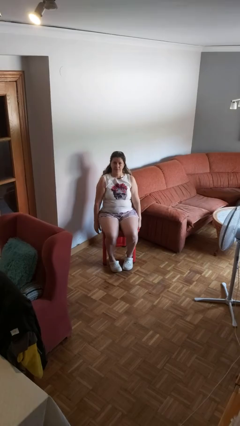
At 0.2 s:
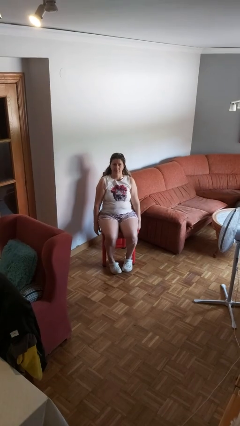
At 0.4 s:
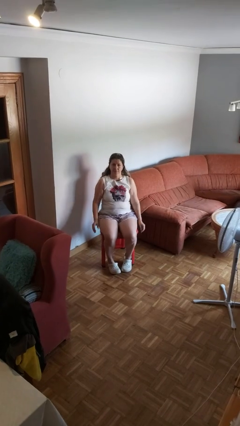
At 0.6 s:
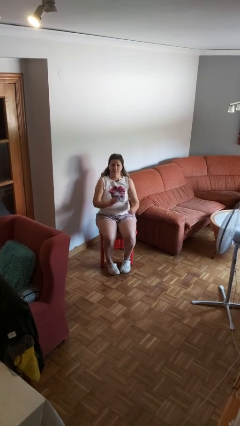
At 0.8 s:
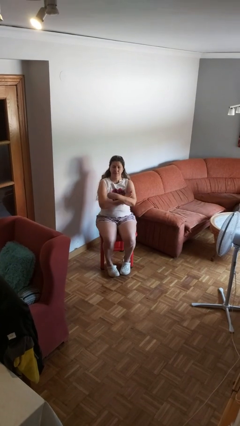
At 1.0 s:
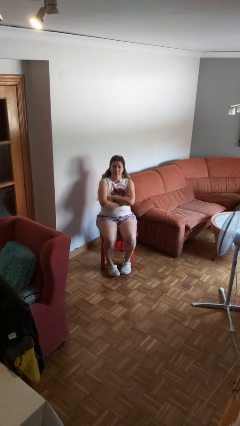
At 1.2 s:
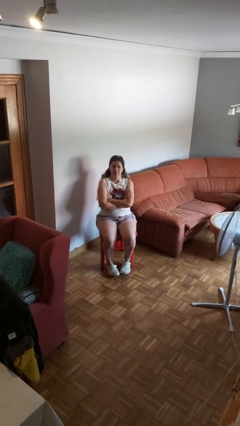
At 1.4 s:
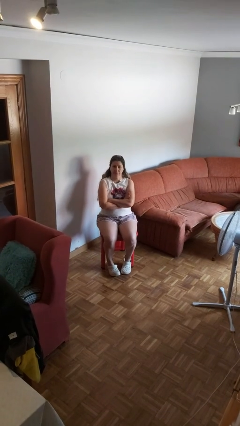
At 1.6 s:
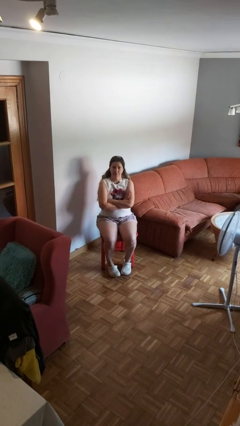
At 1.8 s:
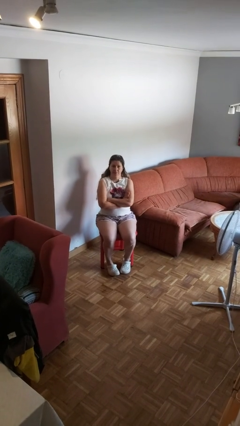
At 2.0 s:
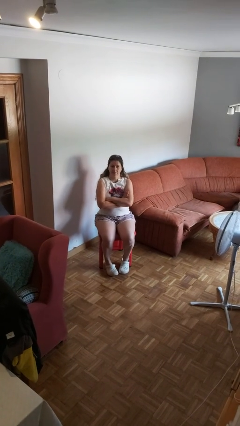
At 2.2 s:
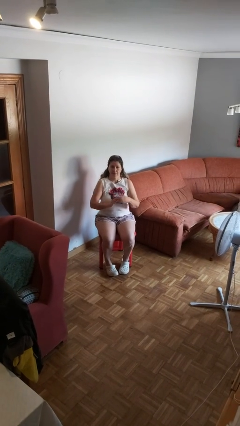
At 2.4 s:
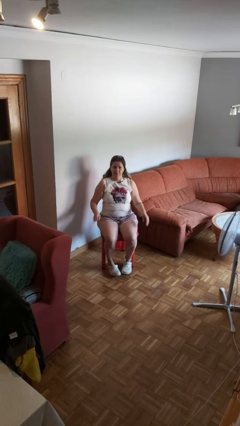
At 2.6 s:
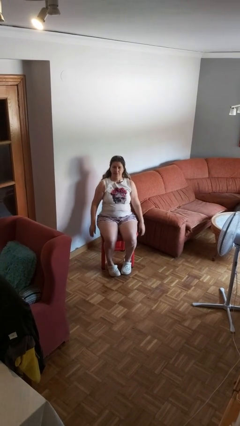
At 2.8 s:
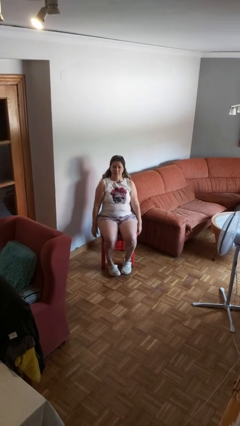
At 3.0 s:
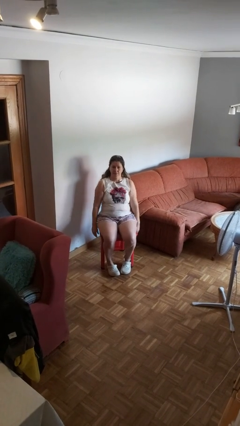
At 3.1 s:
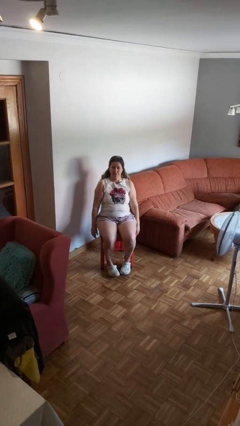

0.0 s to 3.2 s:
person crosses arms

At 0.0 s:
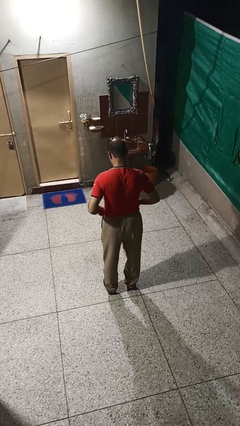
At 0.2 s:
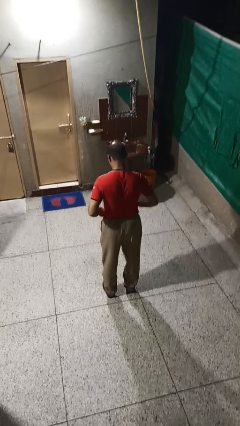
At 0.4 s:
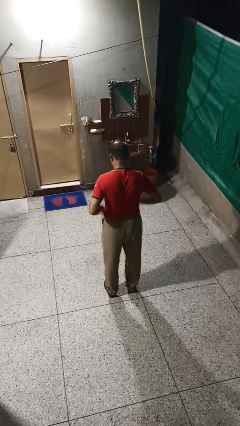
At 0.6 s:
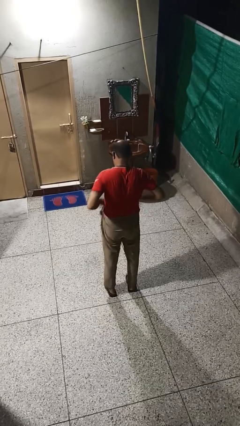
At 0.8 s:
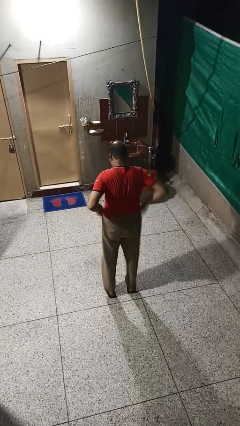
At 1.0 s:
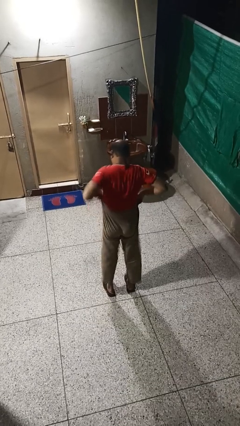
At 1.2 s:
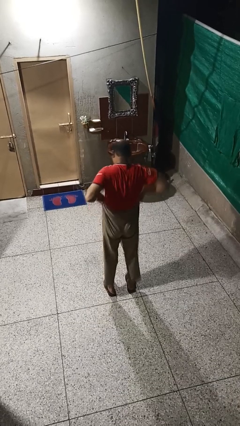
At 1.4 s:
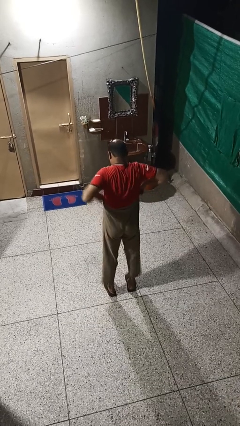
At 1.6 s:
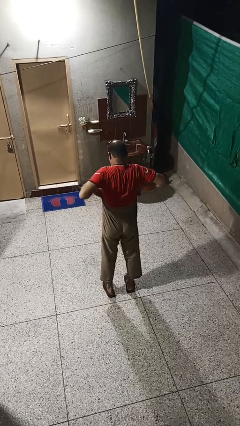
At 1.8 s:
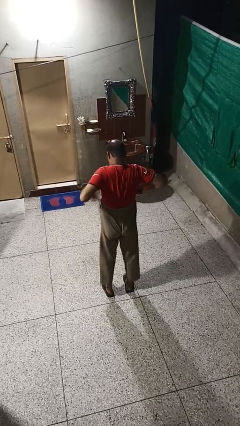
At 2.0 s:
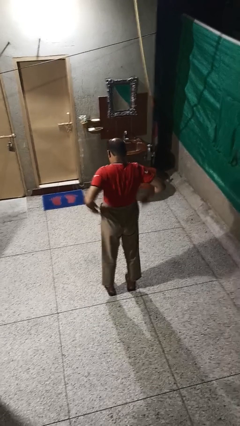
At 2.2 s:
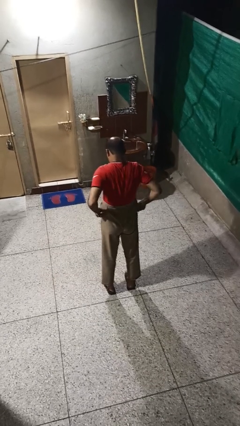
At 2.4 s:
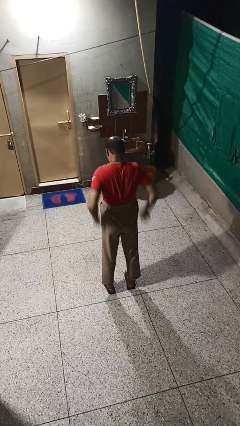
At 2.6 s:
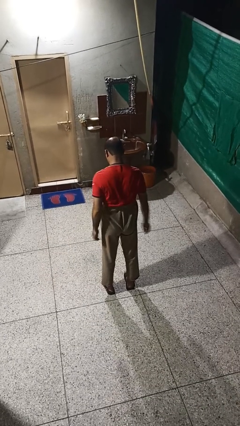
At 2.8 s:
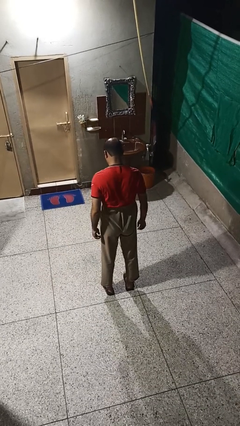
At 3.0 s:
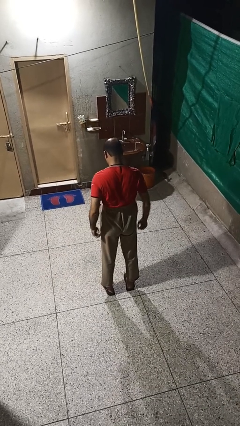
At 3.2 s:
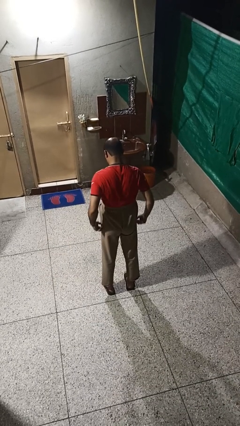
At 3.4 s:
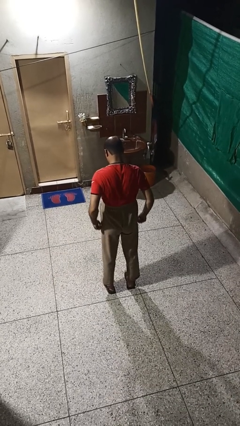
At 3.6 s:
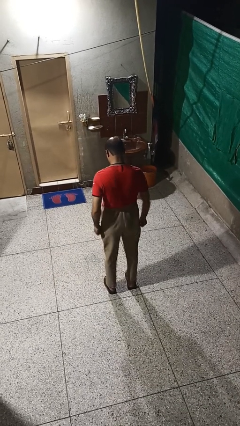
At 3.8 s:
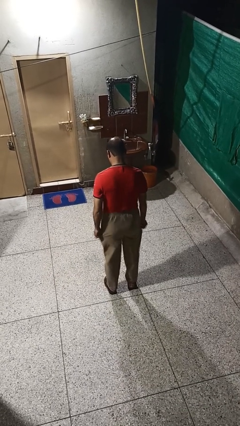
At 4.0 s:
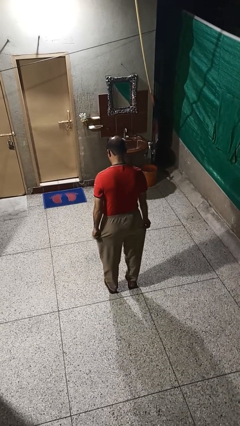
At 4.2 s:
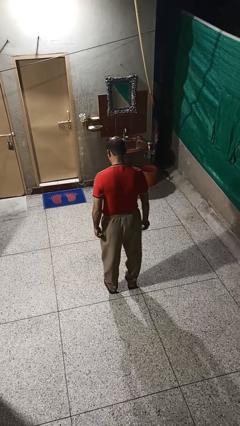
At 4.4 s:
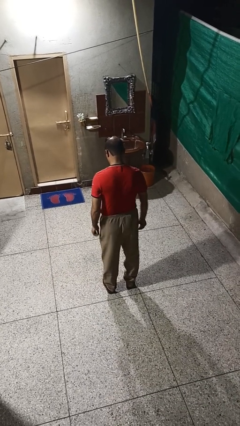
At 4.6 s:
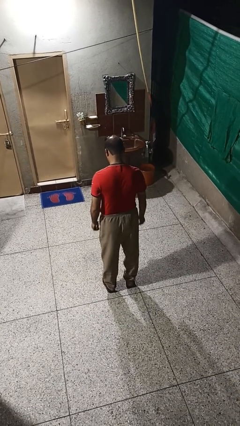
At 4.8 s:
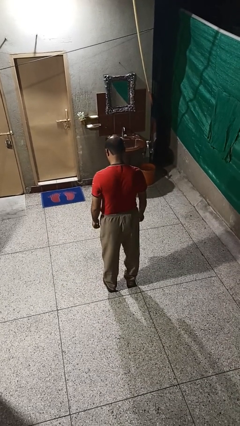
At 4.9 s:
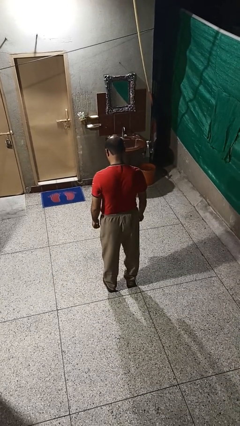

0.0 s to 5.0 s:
person hikes up pants

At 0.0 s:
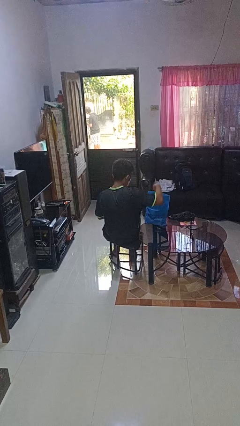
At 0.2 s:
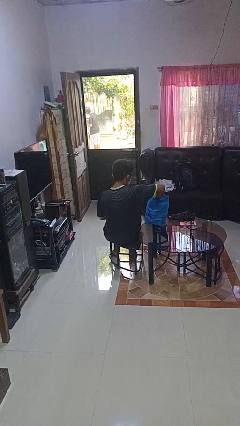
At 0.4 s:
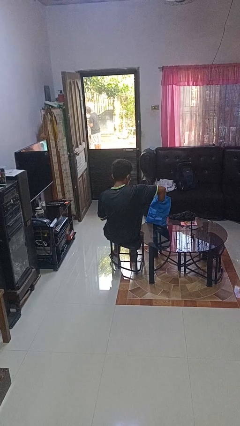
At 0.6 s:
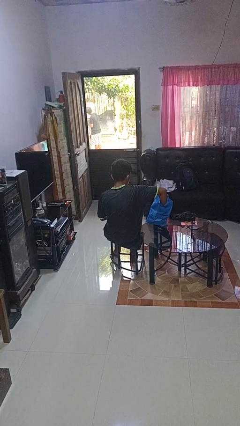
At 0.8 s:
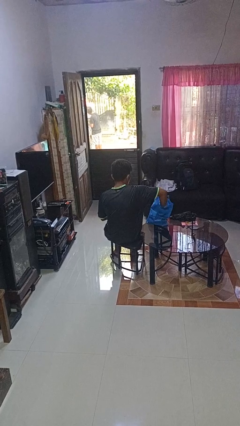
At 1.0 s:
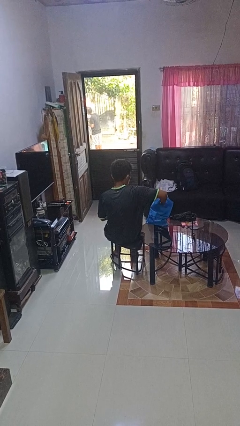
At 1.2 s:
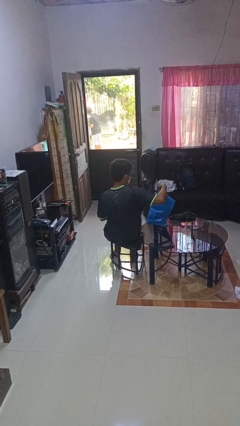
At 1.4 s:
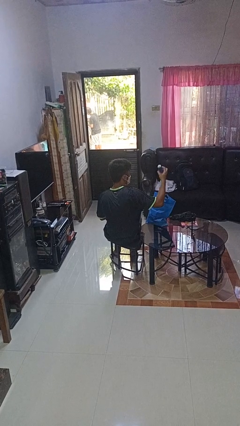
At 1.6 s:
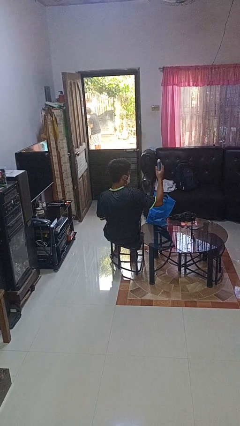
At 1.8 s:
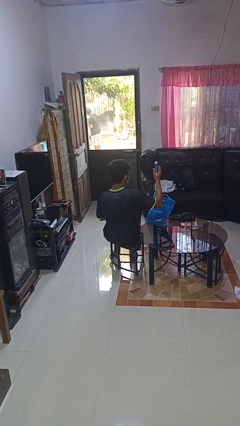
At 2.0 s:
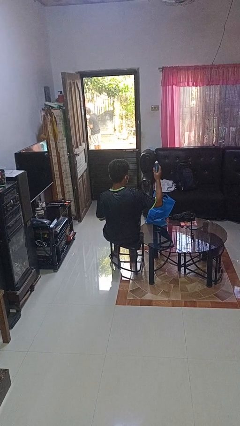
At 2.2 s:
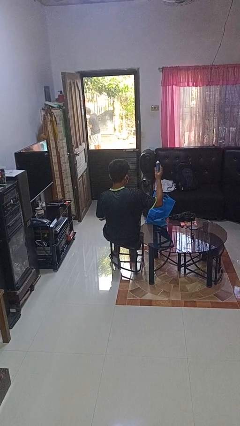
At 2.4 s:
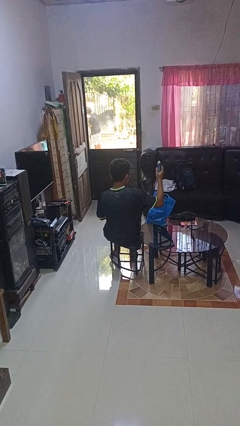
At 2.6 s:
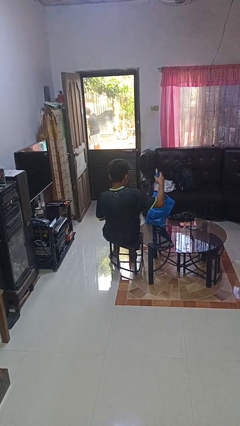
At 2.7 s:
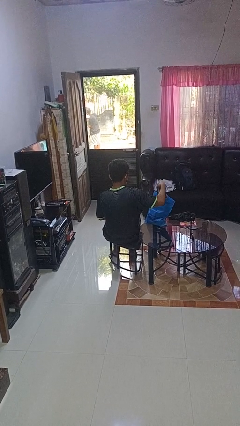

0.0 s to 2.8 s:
person takes object from bag

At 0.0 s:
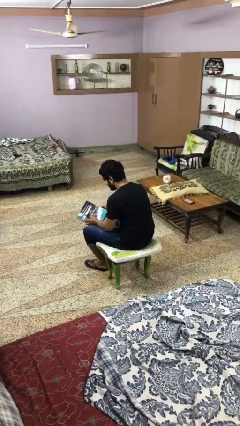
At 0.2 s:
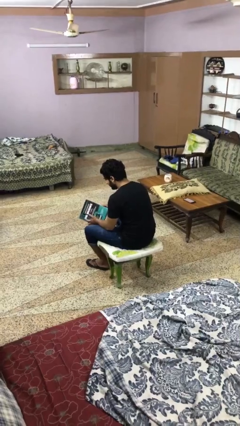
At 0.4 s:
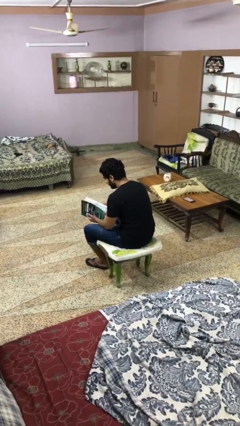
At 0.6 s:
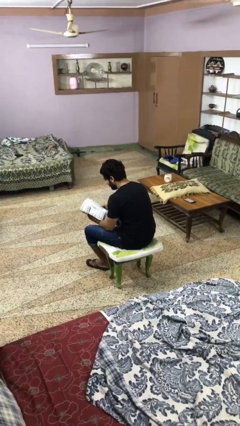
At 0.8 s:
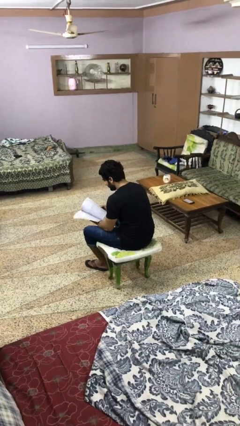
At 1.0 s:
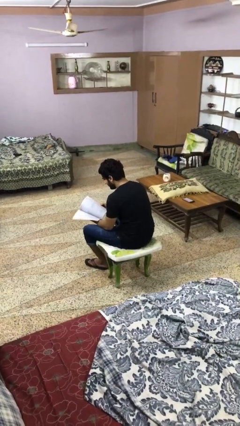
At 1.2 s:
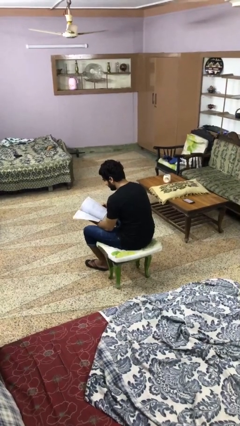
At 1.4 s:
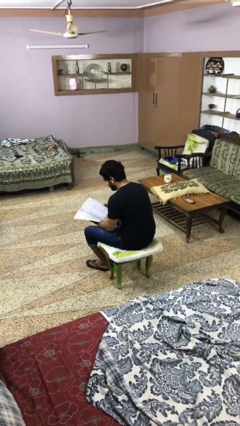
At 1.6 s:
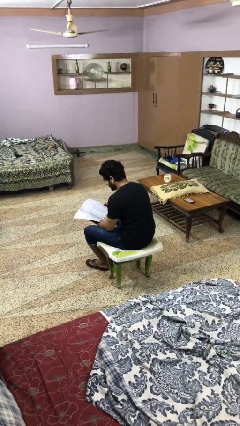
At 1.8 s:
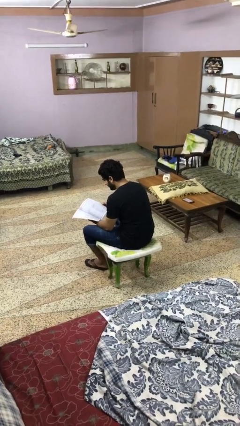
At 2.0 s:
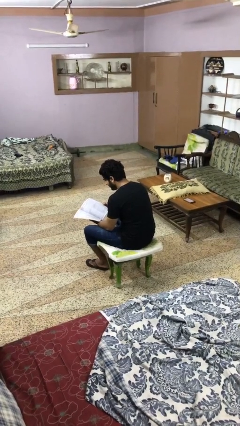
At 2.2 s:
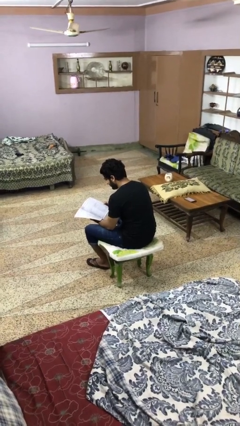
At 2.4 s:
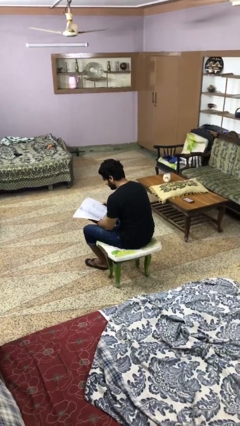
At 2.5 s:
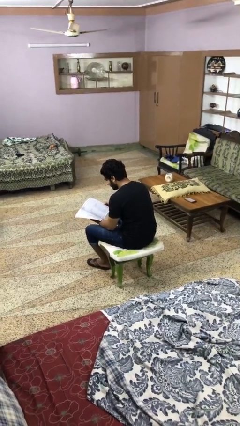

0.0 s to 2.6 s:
person reads book

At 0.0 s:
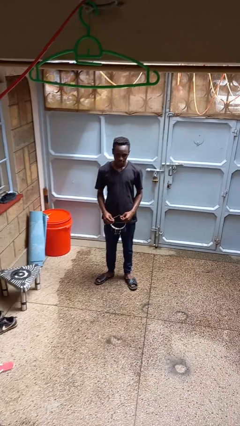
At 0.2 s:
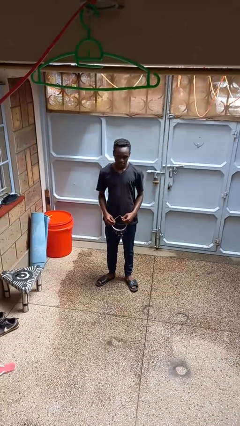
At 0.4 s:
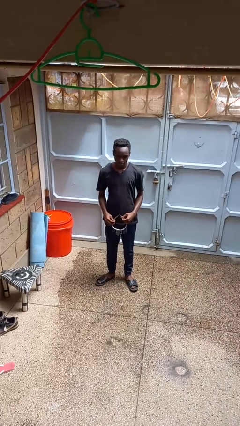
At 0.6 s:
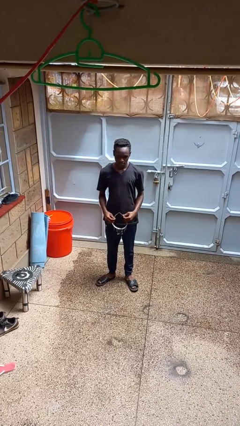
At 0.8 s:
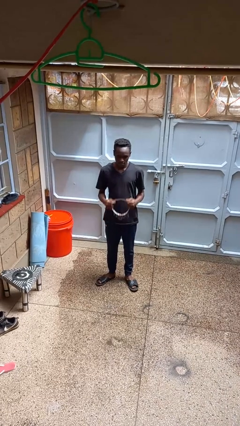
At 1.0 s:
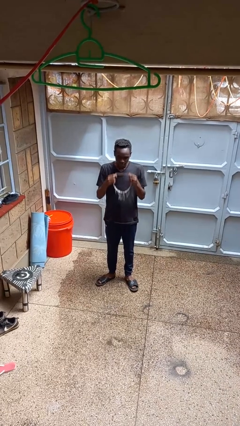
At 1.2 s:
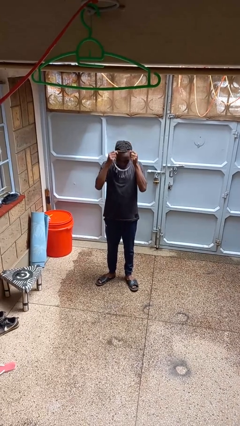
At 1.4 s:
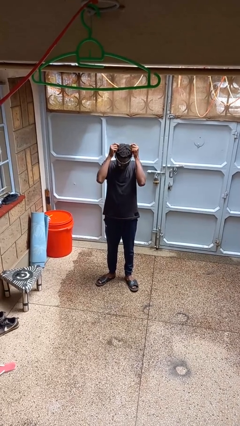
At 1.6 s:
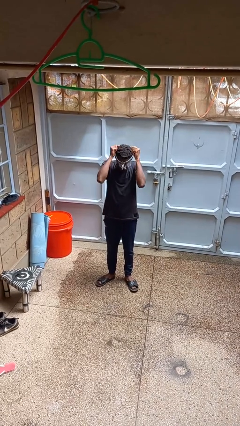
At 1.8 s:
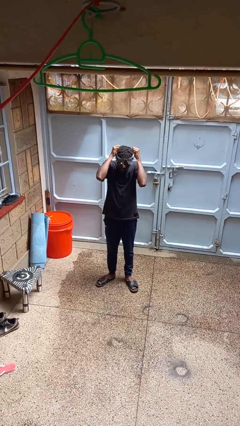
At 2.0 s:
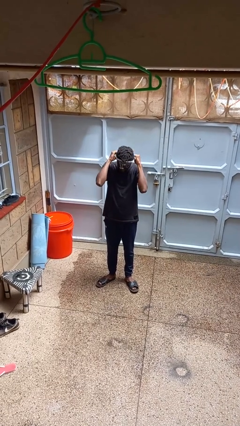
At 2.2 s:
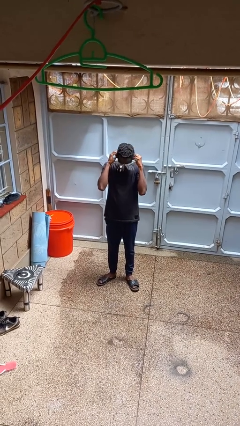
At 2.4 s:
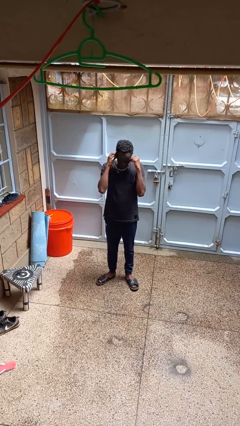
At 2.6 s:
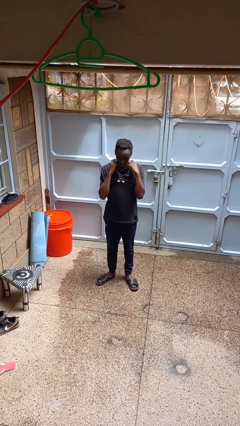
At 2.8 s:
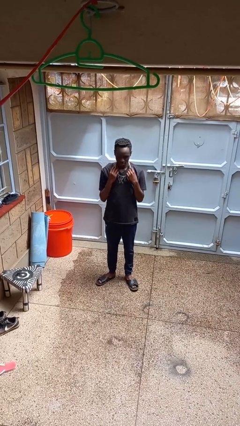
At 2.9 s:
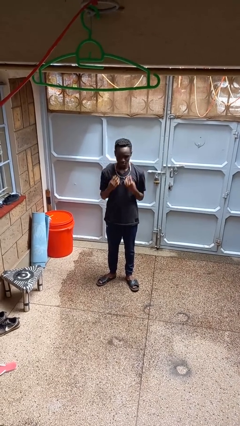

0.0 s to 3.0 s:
person puts on necklace

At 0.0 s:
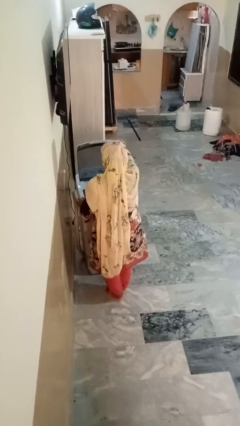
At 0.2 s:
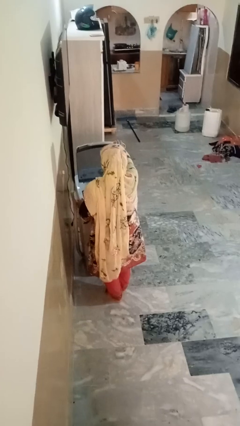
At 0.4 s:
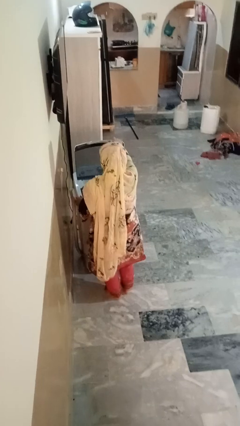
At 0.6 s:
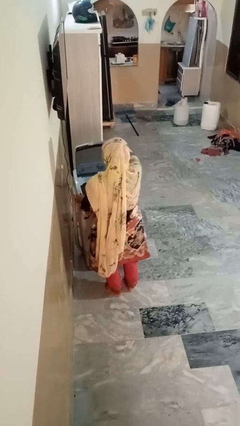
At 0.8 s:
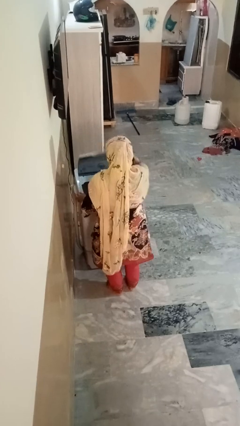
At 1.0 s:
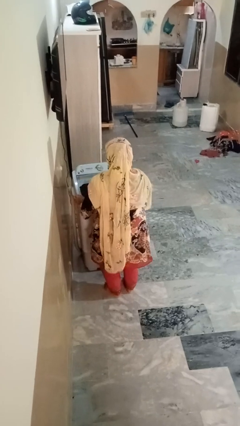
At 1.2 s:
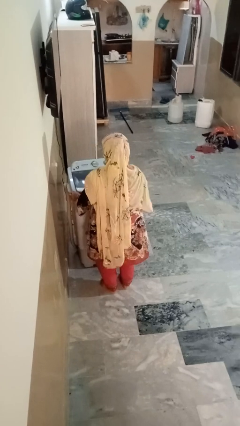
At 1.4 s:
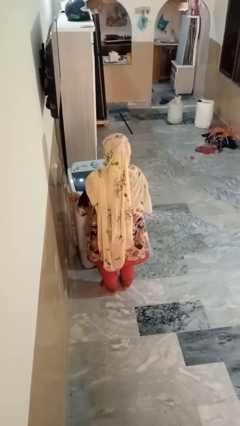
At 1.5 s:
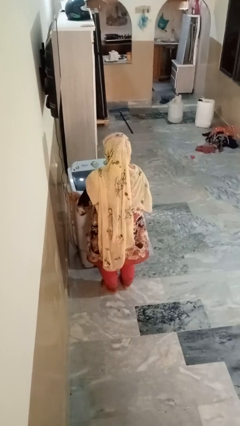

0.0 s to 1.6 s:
person closes clothes washer
